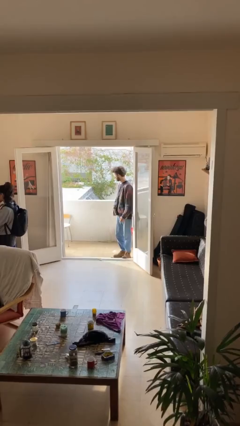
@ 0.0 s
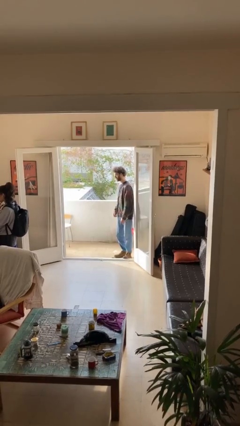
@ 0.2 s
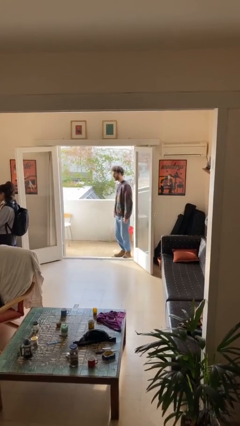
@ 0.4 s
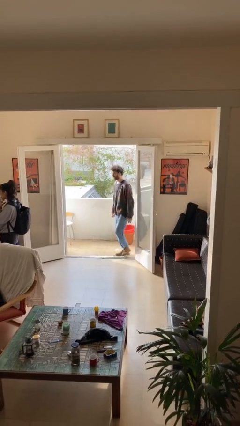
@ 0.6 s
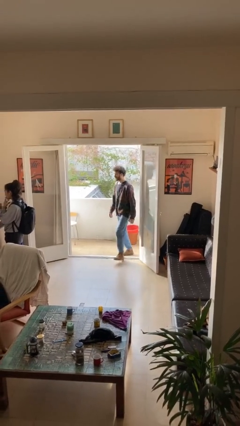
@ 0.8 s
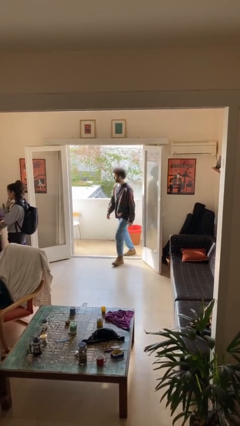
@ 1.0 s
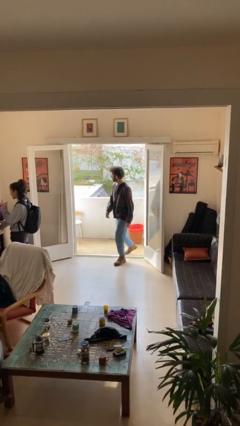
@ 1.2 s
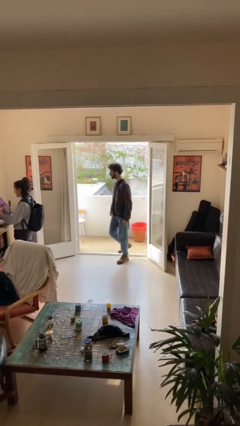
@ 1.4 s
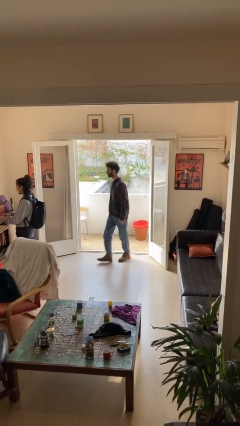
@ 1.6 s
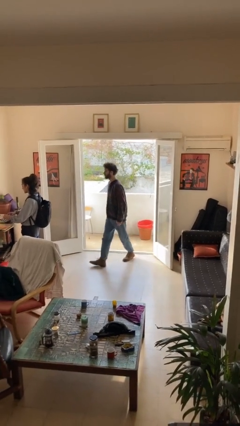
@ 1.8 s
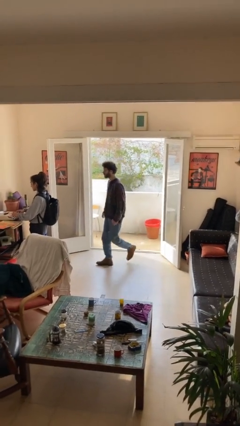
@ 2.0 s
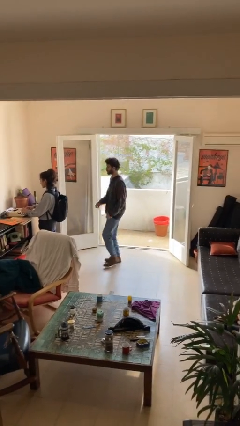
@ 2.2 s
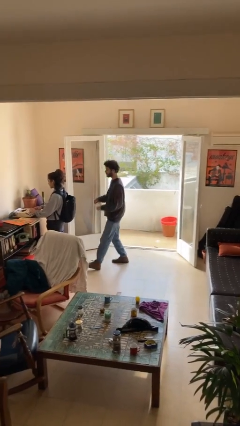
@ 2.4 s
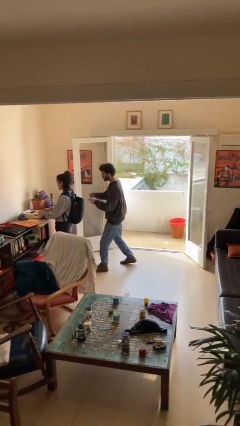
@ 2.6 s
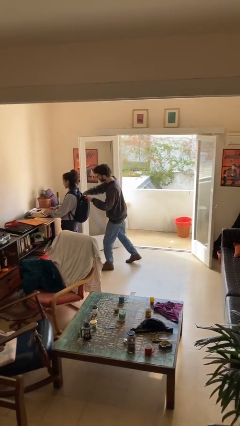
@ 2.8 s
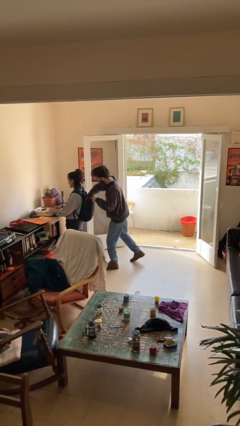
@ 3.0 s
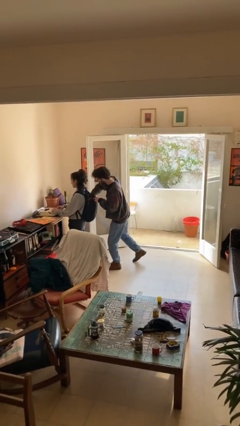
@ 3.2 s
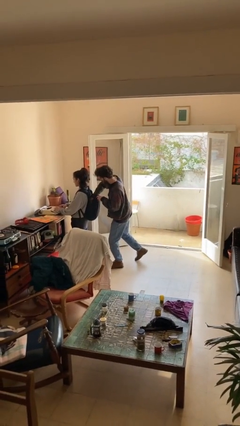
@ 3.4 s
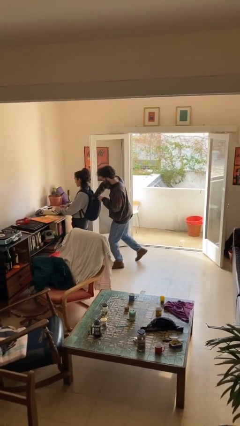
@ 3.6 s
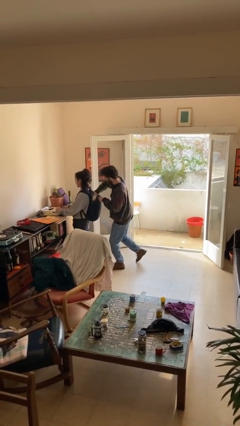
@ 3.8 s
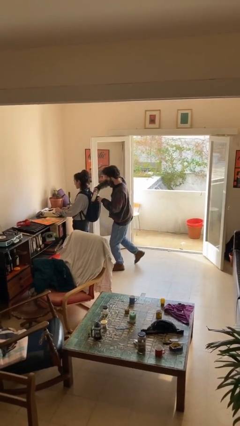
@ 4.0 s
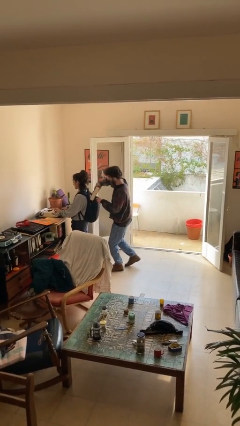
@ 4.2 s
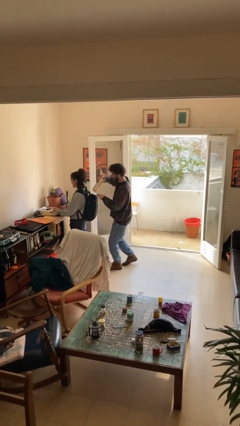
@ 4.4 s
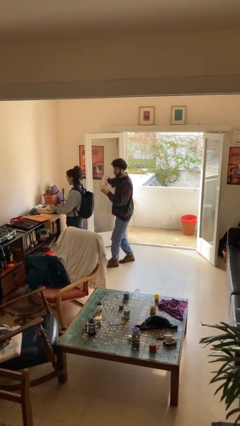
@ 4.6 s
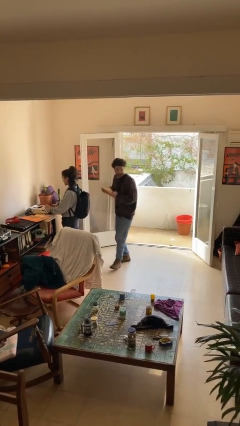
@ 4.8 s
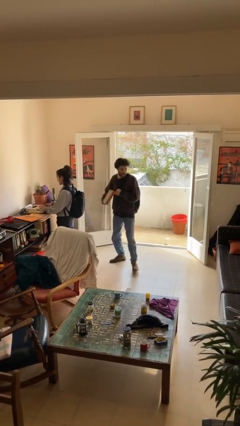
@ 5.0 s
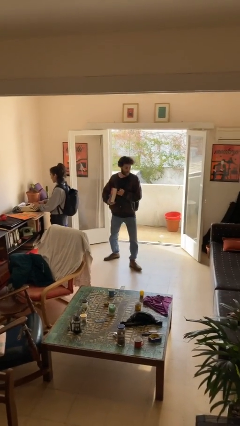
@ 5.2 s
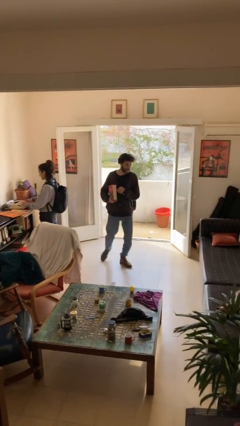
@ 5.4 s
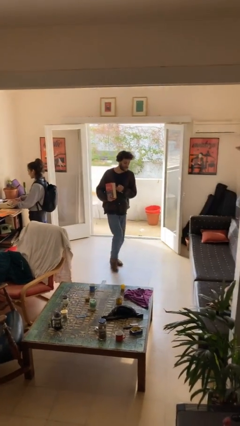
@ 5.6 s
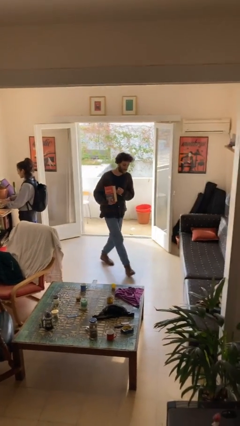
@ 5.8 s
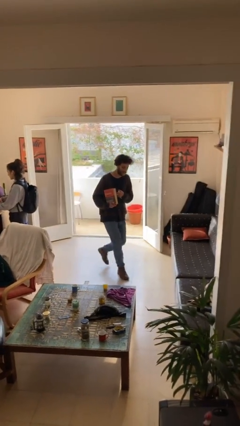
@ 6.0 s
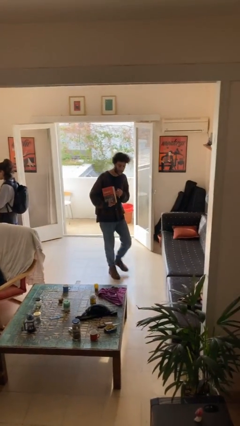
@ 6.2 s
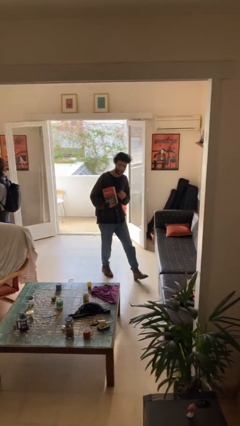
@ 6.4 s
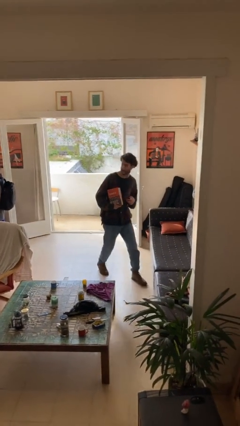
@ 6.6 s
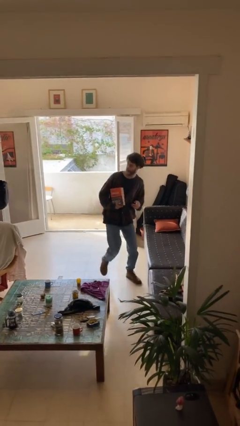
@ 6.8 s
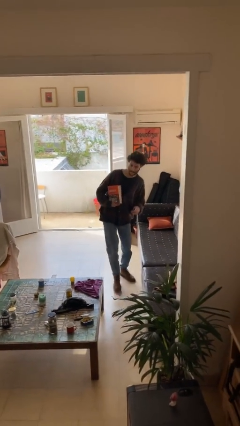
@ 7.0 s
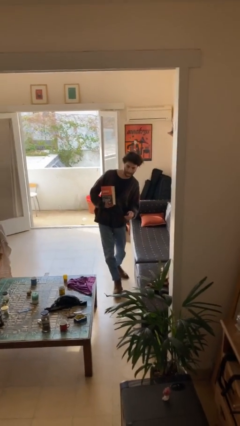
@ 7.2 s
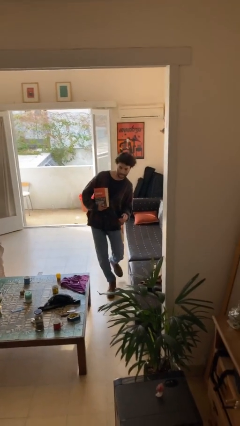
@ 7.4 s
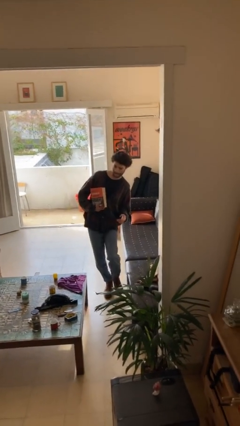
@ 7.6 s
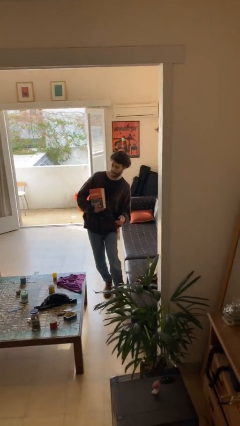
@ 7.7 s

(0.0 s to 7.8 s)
person steals object from person

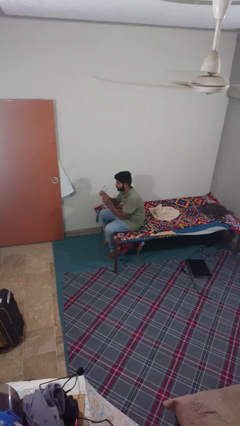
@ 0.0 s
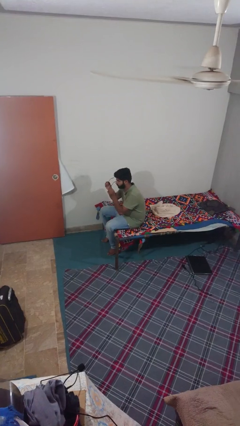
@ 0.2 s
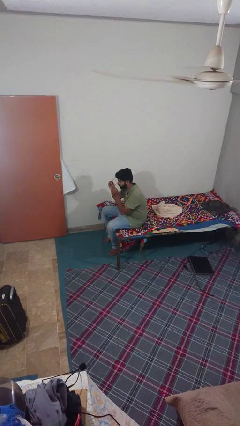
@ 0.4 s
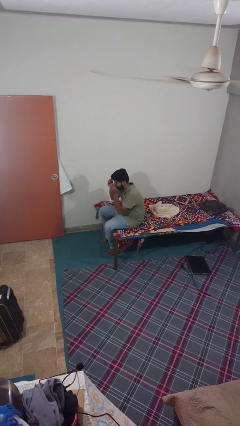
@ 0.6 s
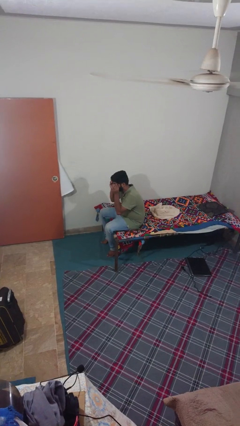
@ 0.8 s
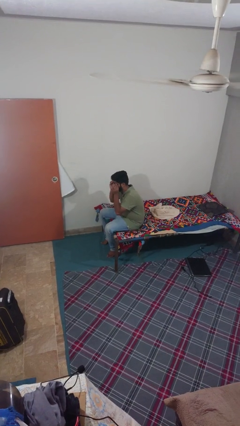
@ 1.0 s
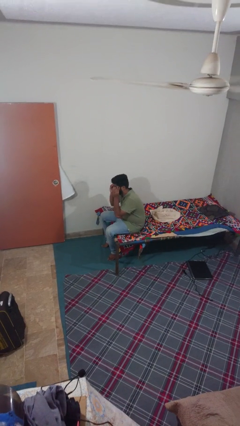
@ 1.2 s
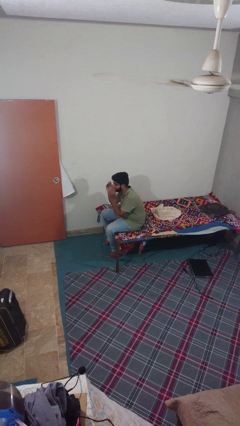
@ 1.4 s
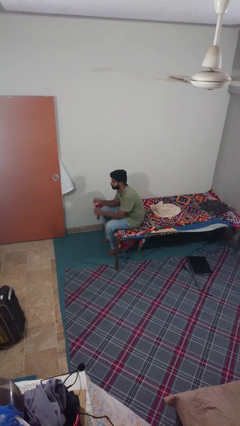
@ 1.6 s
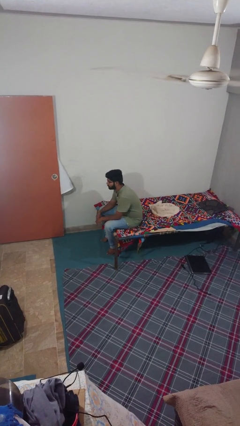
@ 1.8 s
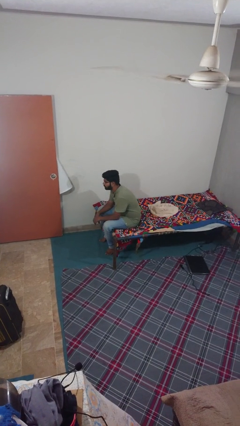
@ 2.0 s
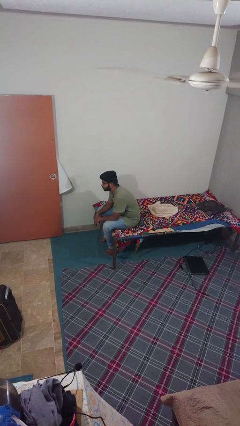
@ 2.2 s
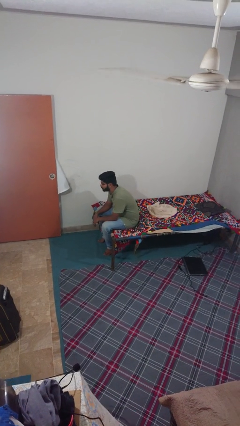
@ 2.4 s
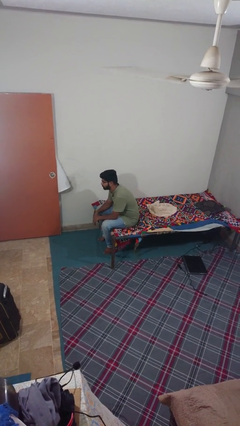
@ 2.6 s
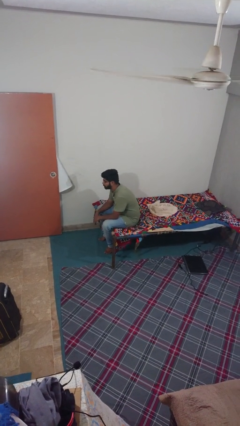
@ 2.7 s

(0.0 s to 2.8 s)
person puts on glasses

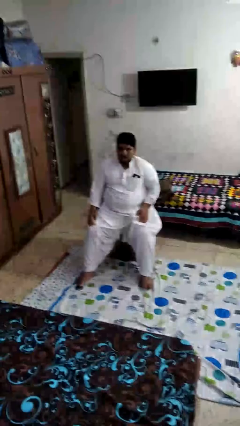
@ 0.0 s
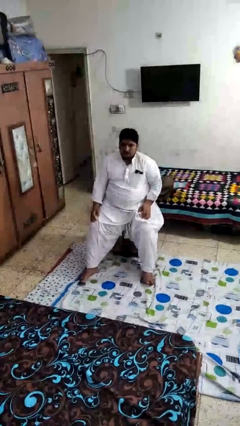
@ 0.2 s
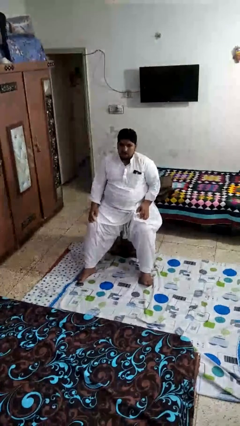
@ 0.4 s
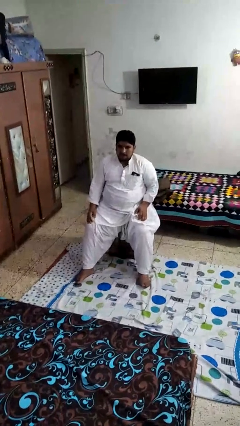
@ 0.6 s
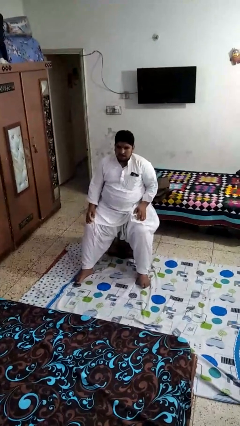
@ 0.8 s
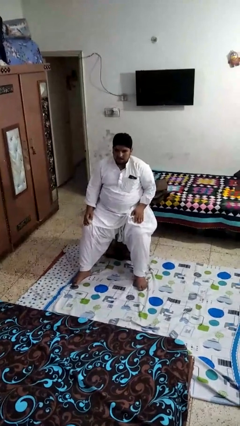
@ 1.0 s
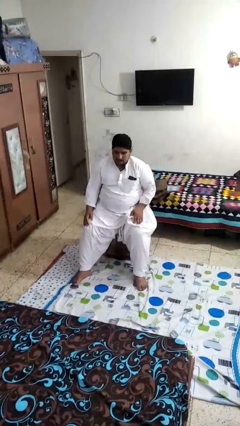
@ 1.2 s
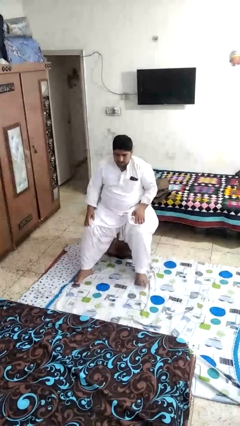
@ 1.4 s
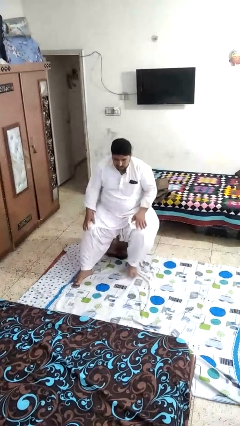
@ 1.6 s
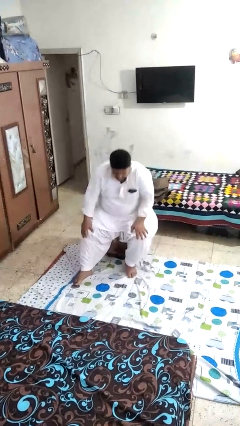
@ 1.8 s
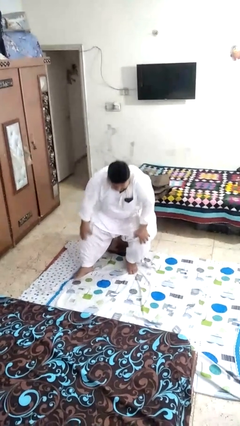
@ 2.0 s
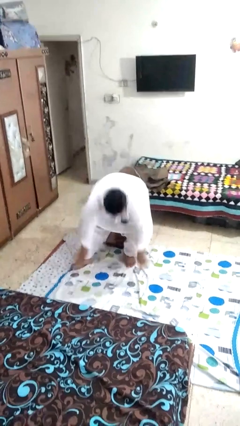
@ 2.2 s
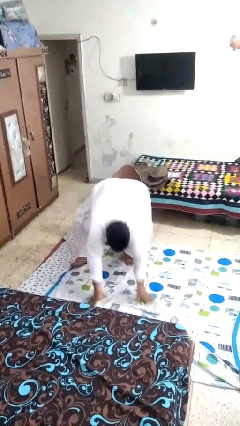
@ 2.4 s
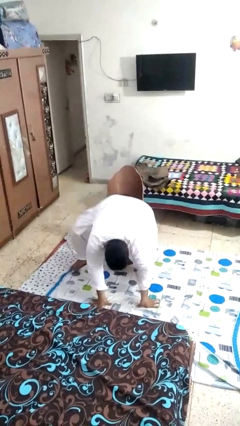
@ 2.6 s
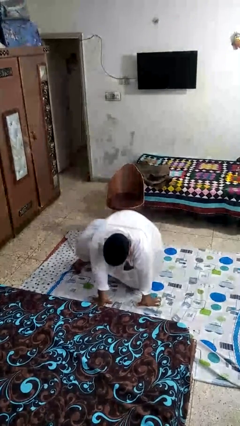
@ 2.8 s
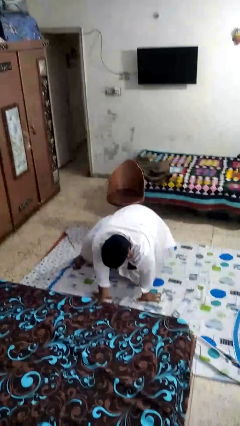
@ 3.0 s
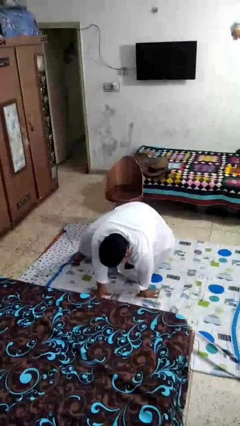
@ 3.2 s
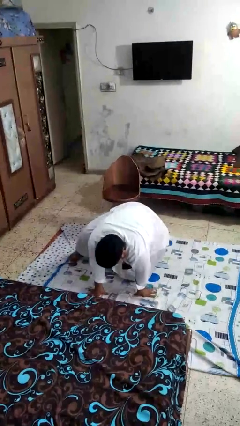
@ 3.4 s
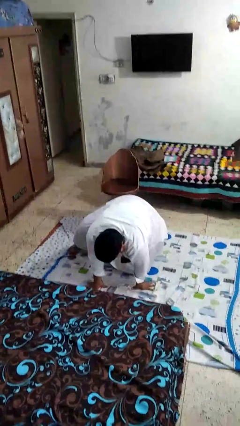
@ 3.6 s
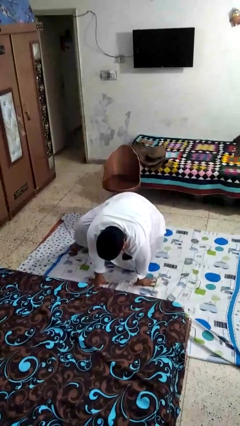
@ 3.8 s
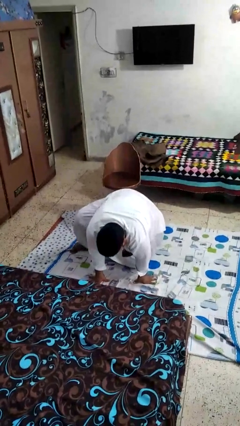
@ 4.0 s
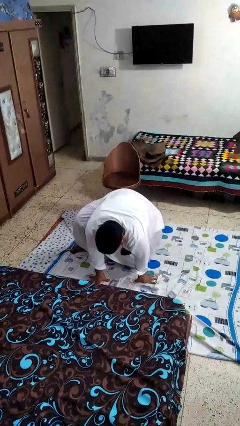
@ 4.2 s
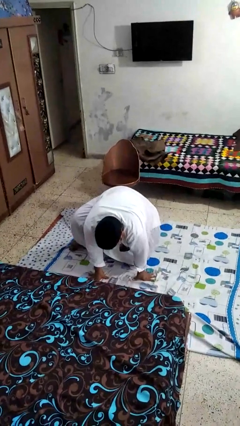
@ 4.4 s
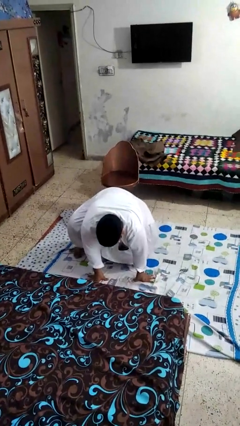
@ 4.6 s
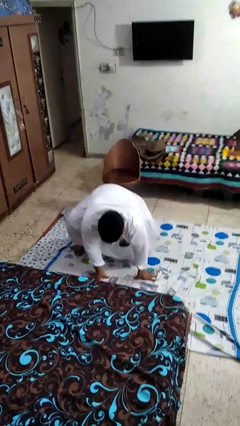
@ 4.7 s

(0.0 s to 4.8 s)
person falls from chair

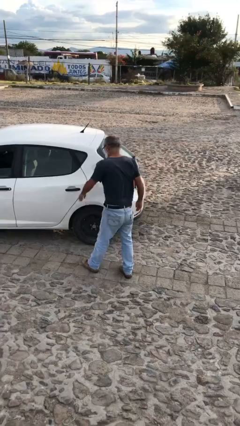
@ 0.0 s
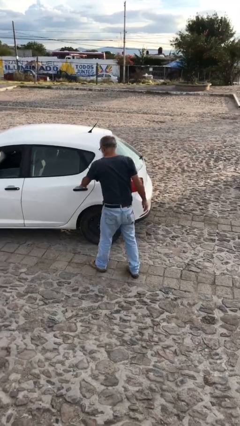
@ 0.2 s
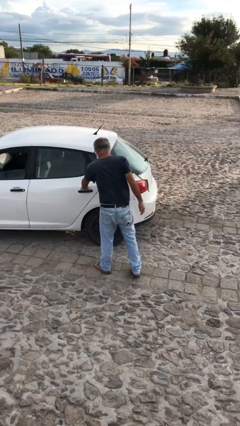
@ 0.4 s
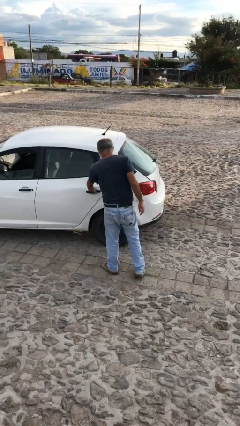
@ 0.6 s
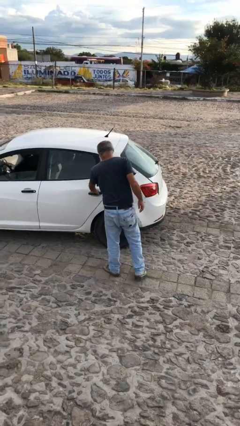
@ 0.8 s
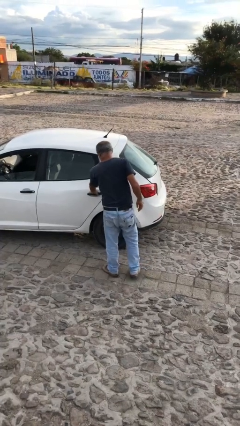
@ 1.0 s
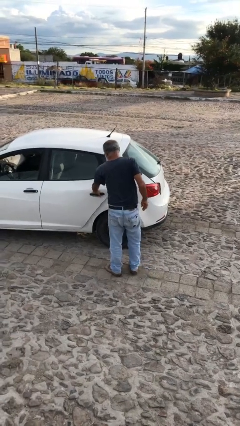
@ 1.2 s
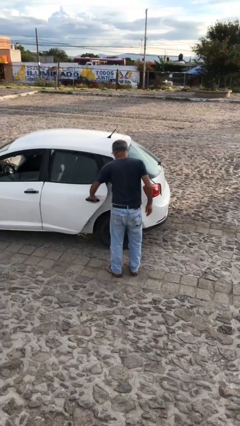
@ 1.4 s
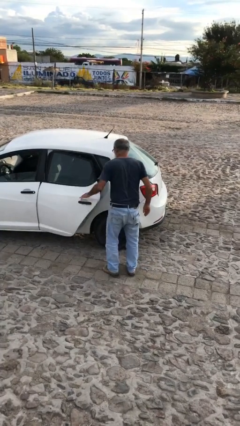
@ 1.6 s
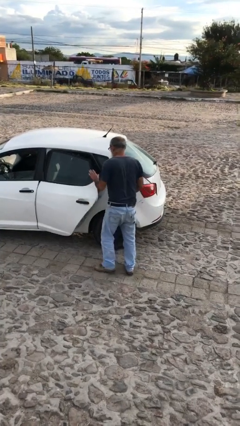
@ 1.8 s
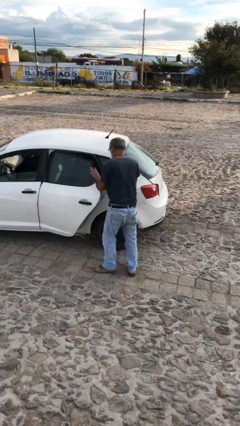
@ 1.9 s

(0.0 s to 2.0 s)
person opens car door

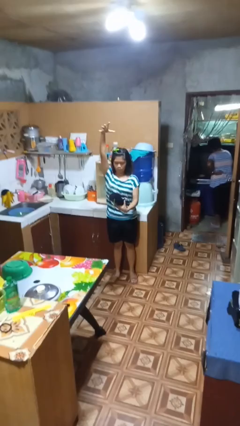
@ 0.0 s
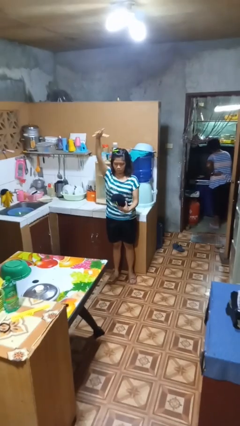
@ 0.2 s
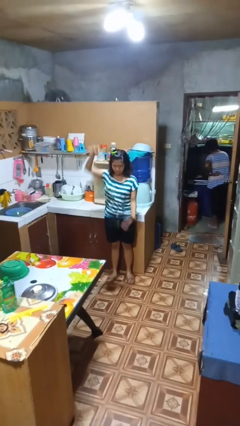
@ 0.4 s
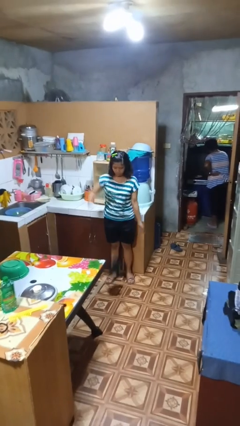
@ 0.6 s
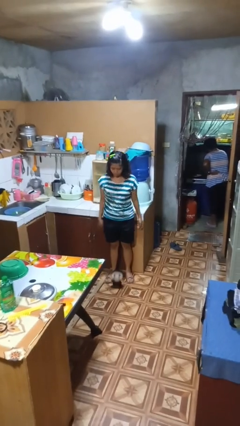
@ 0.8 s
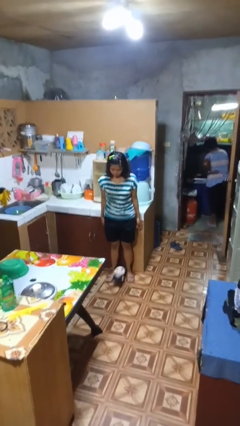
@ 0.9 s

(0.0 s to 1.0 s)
person catches dropped object
